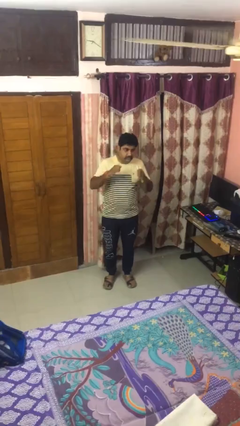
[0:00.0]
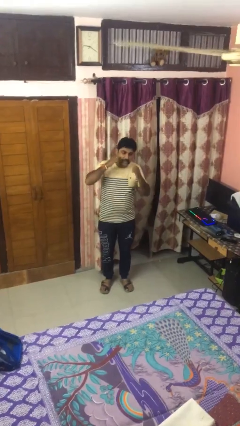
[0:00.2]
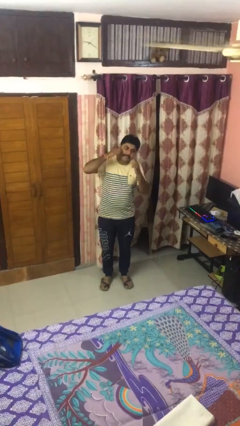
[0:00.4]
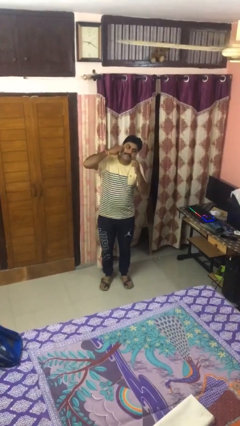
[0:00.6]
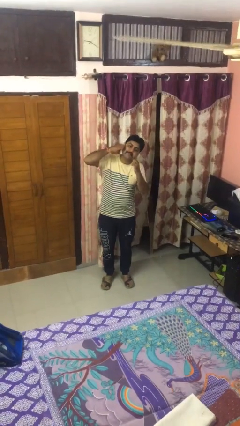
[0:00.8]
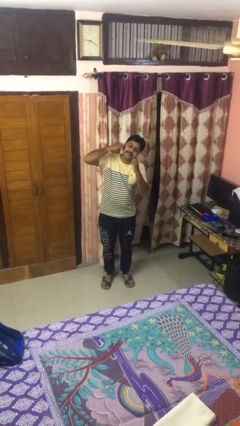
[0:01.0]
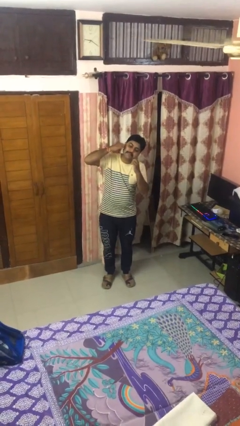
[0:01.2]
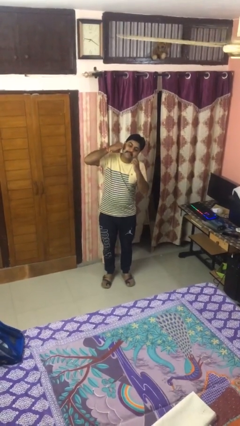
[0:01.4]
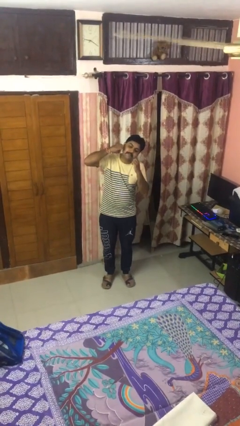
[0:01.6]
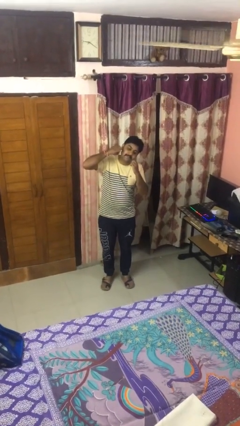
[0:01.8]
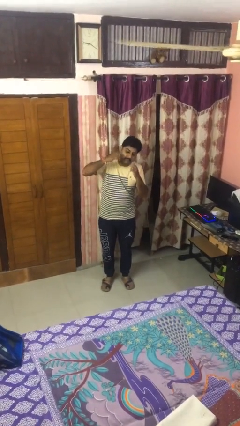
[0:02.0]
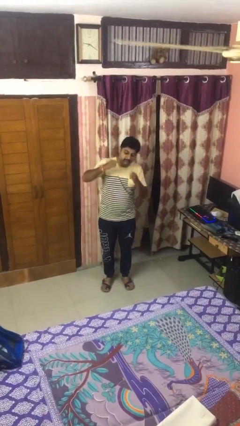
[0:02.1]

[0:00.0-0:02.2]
person flosses

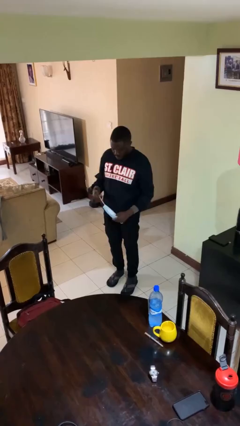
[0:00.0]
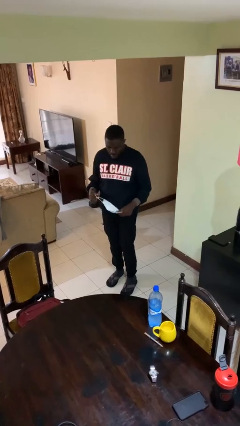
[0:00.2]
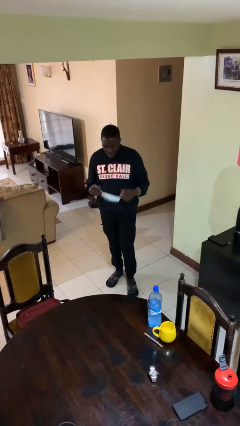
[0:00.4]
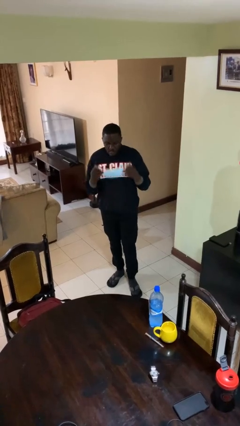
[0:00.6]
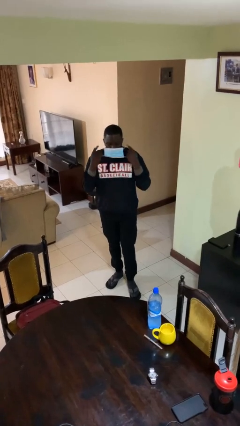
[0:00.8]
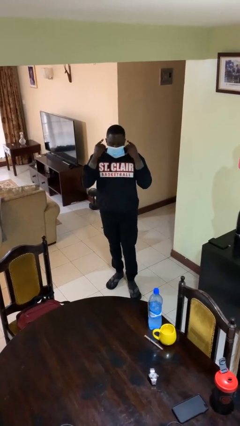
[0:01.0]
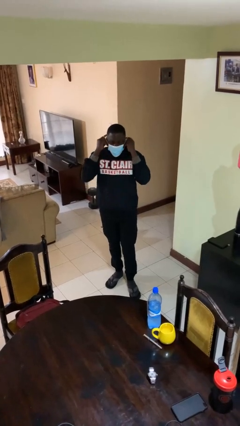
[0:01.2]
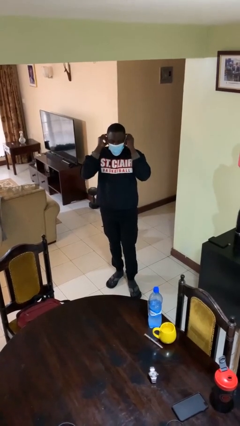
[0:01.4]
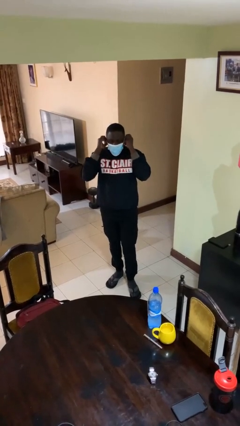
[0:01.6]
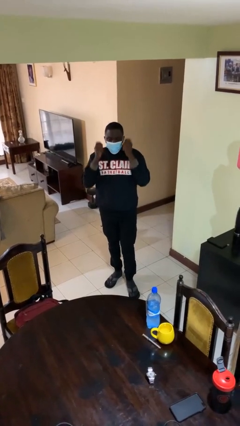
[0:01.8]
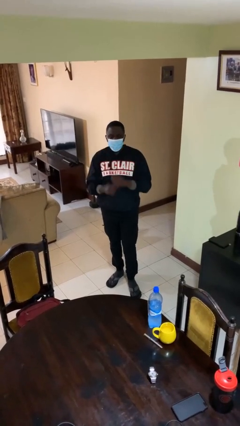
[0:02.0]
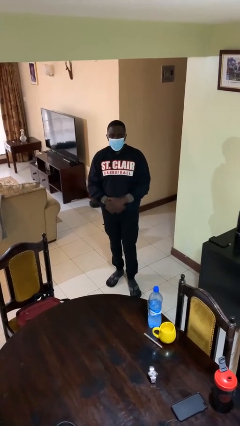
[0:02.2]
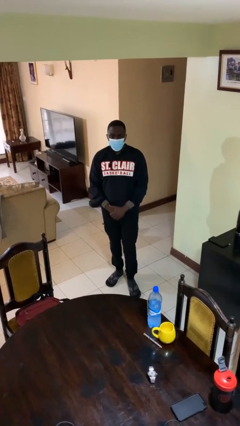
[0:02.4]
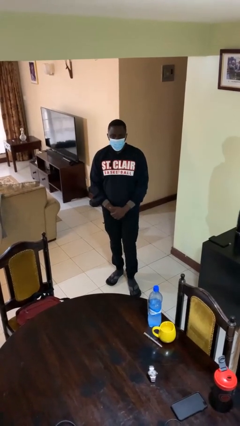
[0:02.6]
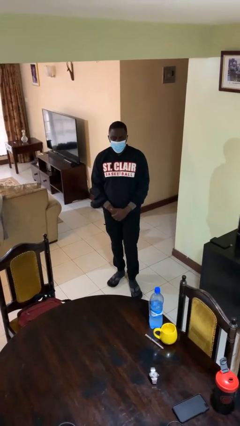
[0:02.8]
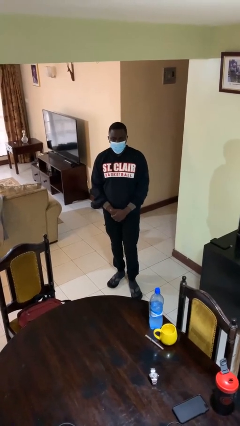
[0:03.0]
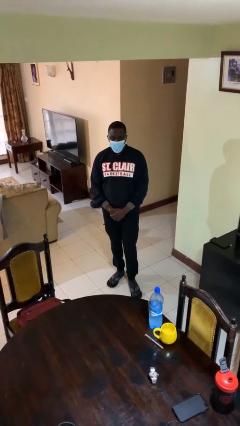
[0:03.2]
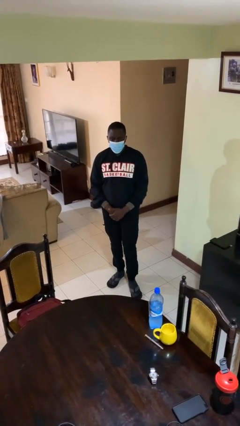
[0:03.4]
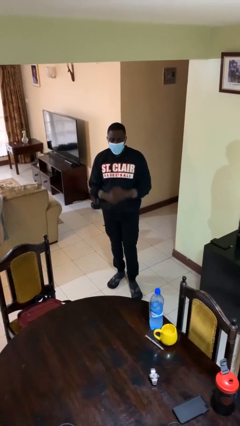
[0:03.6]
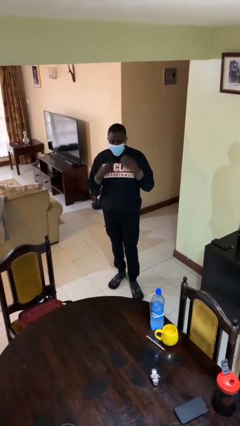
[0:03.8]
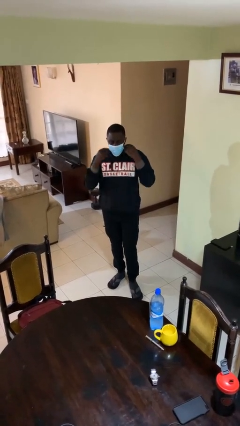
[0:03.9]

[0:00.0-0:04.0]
person puts on facemask

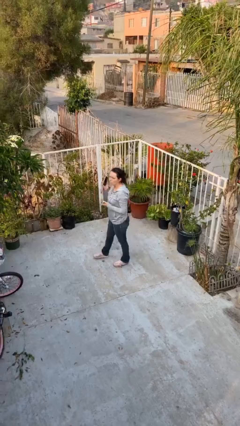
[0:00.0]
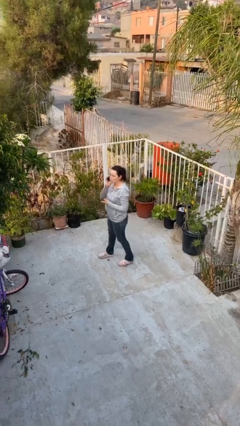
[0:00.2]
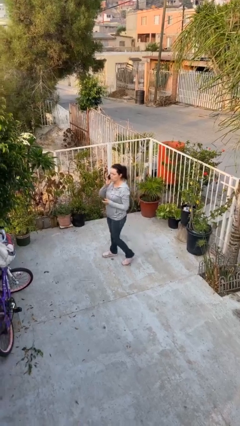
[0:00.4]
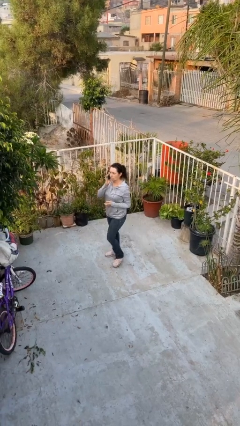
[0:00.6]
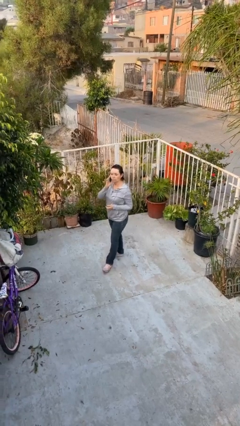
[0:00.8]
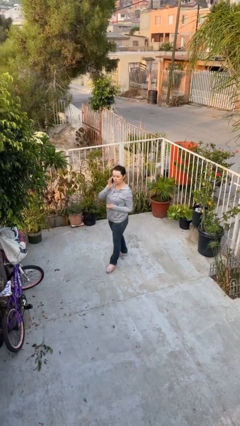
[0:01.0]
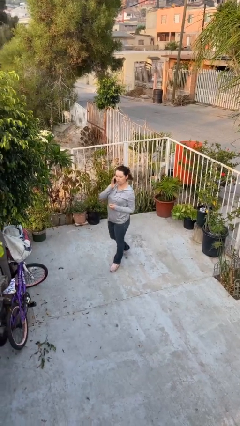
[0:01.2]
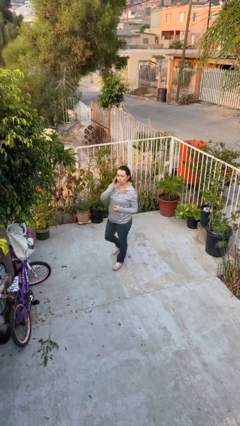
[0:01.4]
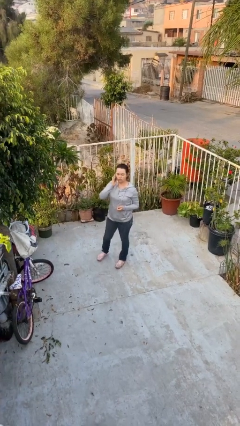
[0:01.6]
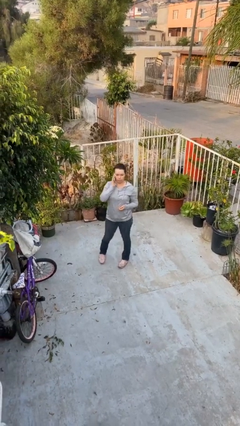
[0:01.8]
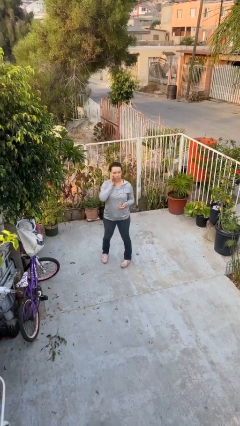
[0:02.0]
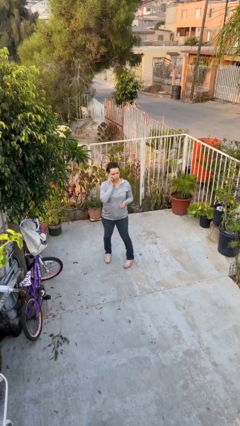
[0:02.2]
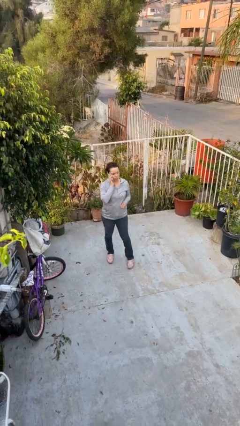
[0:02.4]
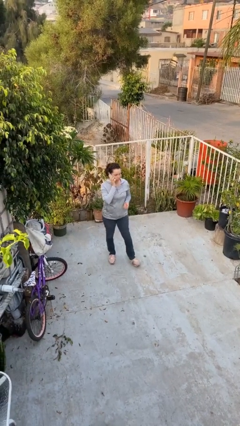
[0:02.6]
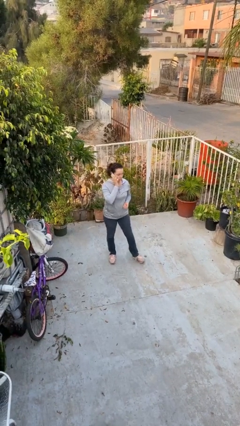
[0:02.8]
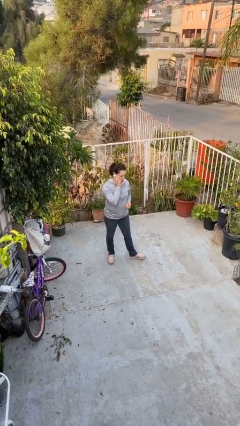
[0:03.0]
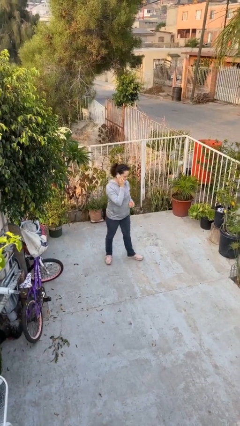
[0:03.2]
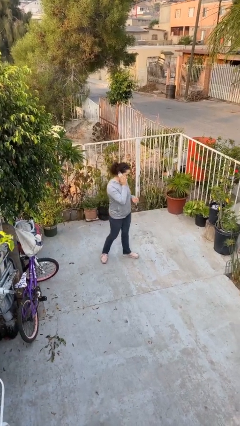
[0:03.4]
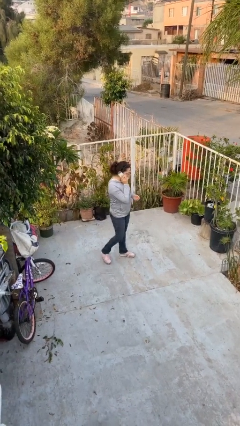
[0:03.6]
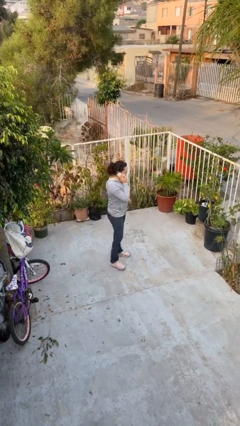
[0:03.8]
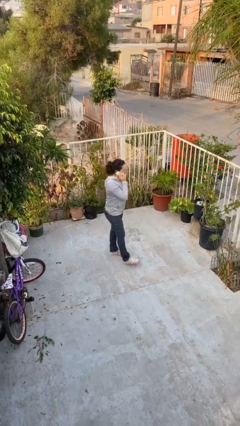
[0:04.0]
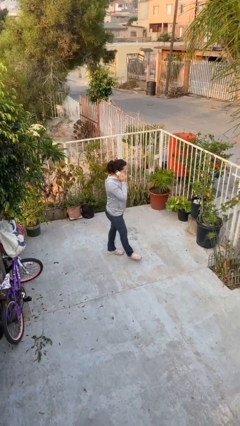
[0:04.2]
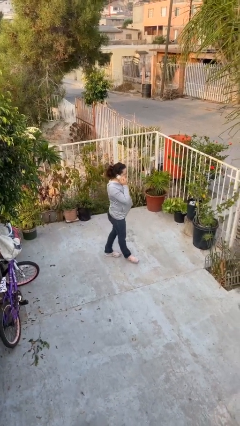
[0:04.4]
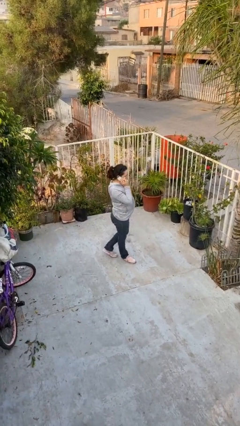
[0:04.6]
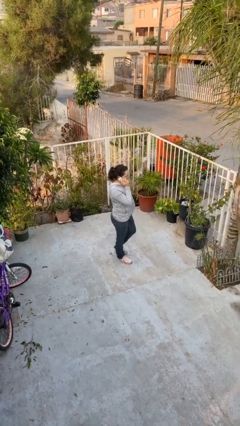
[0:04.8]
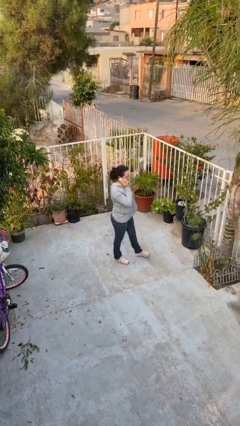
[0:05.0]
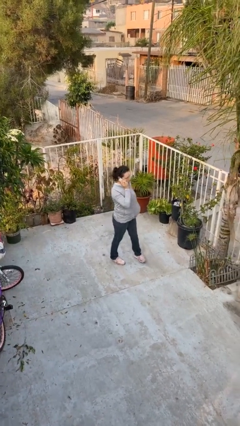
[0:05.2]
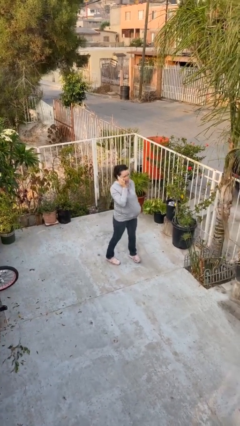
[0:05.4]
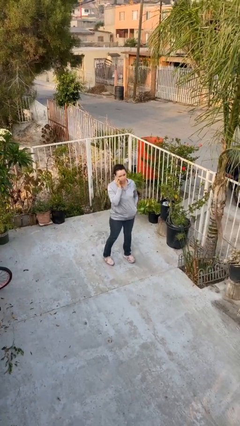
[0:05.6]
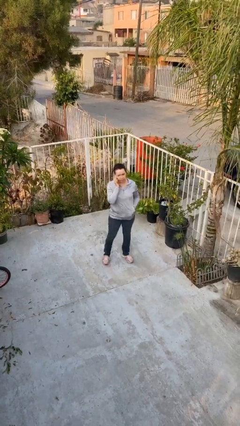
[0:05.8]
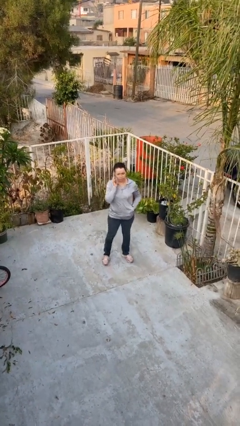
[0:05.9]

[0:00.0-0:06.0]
person talks on phone

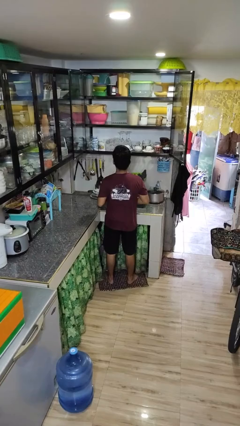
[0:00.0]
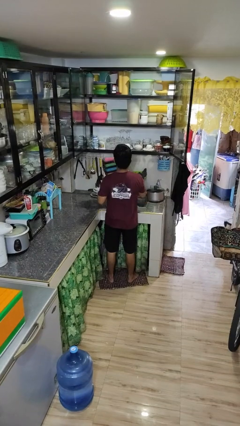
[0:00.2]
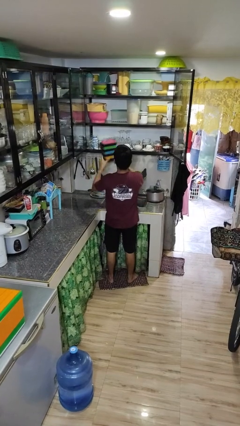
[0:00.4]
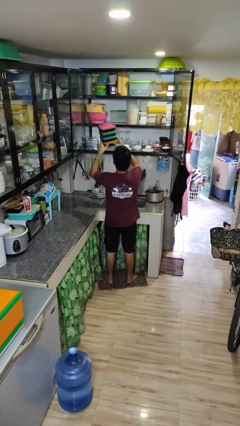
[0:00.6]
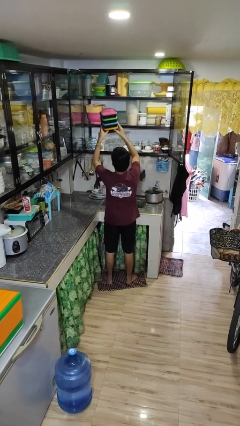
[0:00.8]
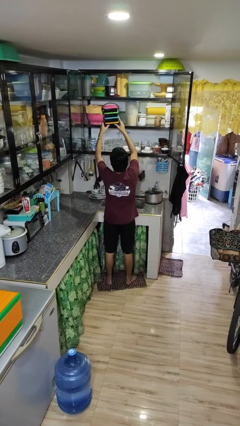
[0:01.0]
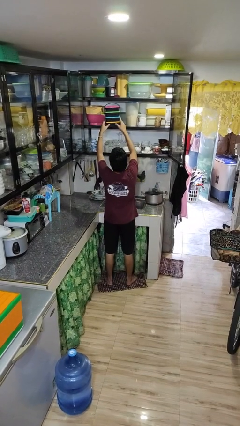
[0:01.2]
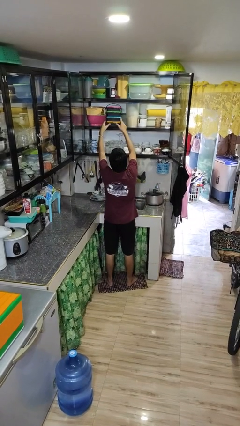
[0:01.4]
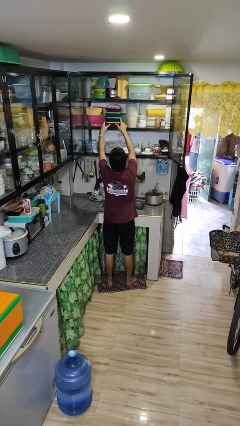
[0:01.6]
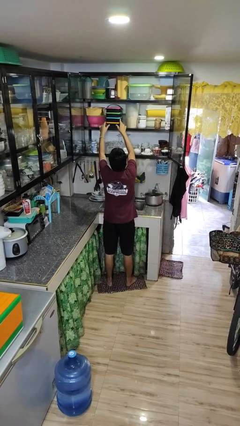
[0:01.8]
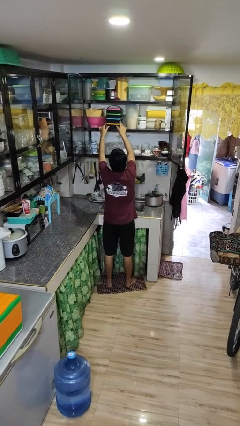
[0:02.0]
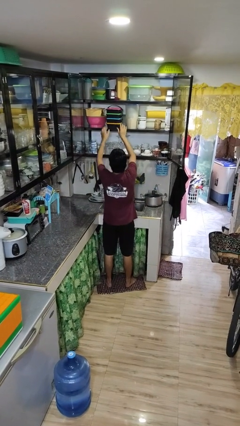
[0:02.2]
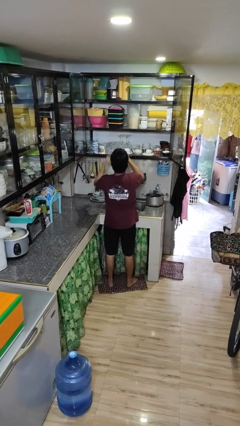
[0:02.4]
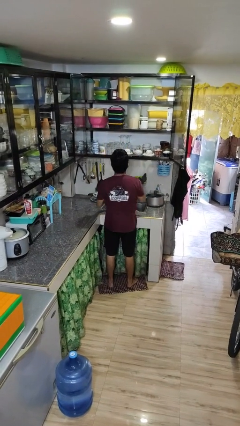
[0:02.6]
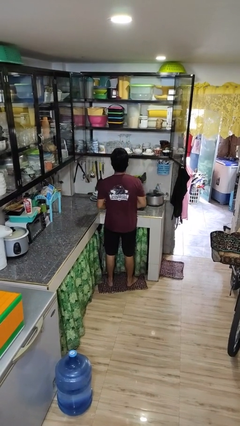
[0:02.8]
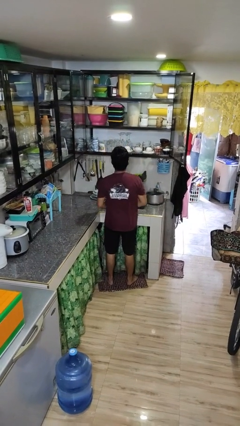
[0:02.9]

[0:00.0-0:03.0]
person puts down object into cabinet

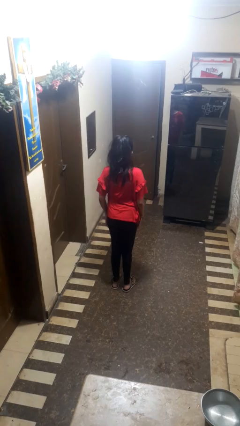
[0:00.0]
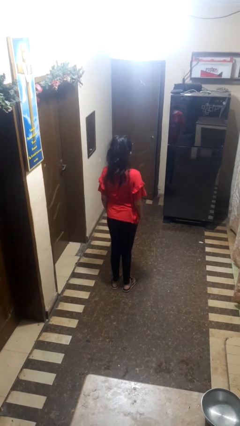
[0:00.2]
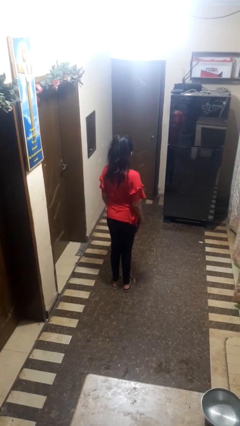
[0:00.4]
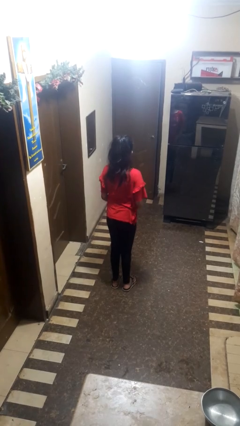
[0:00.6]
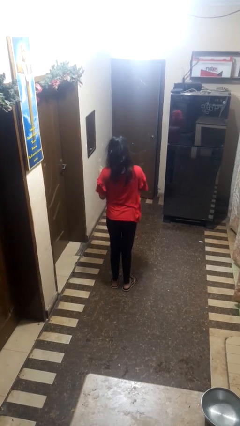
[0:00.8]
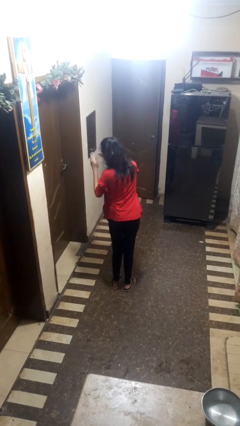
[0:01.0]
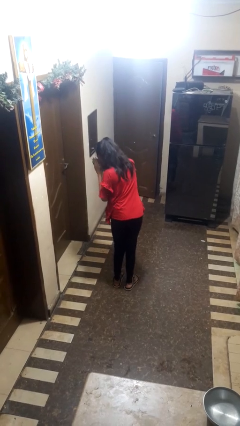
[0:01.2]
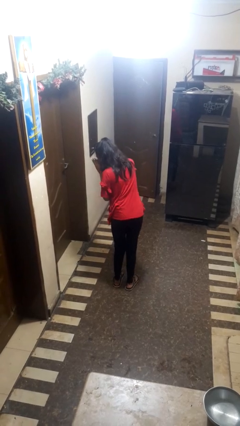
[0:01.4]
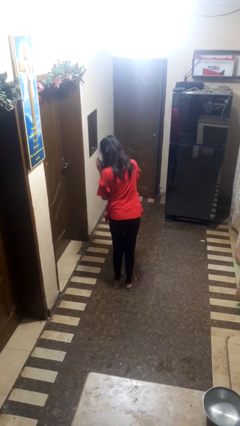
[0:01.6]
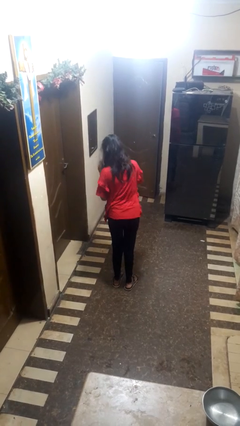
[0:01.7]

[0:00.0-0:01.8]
person sneezes into hand

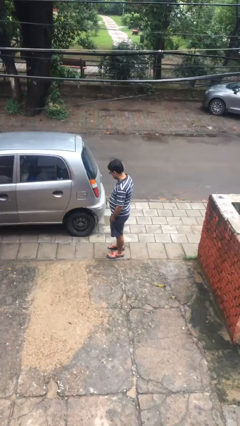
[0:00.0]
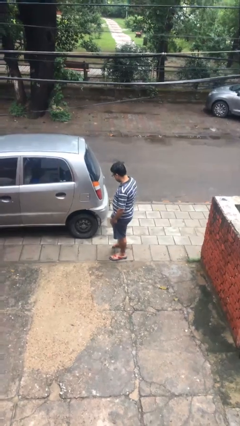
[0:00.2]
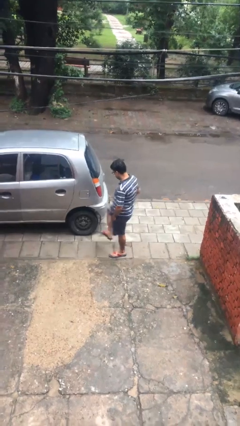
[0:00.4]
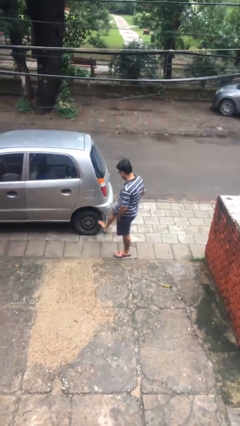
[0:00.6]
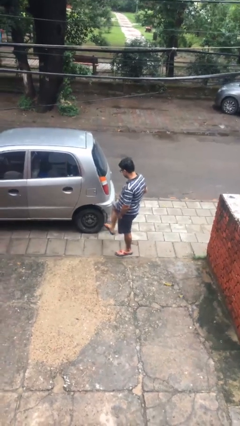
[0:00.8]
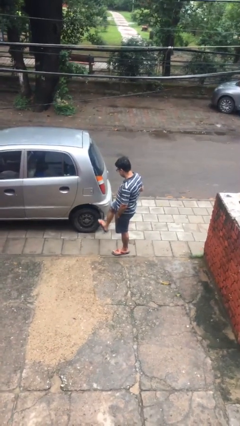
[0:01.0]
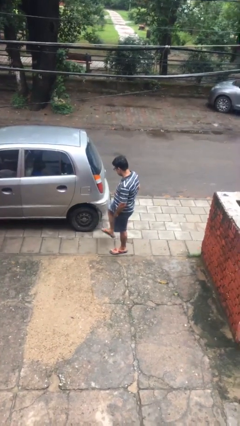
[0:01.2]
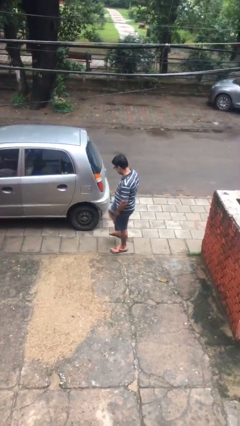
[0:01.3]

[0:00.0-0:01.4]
person kicks car tires
